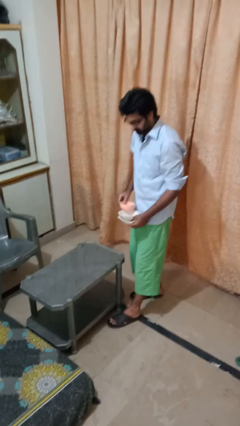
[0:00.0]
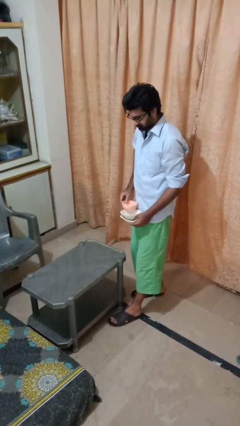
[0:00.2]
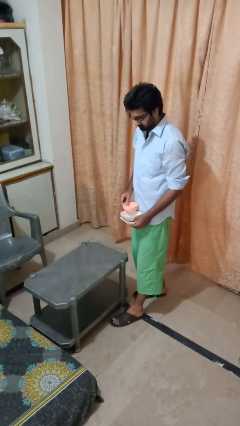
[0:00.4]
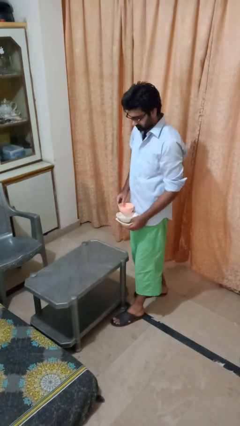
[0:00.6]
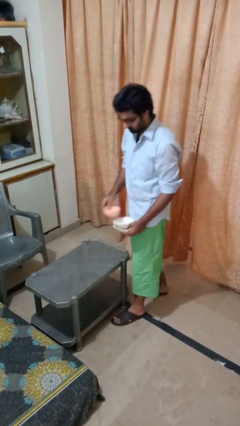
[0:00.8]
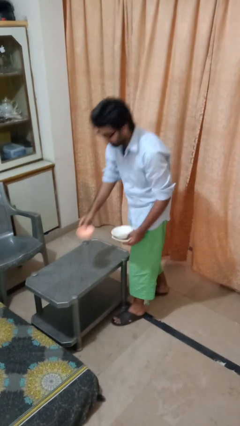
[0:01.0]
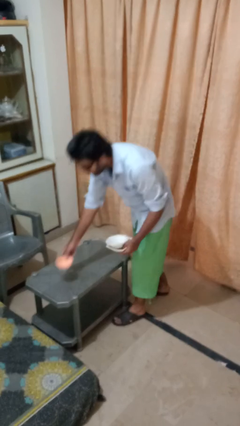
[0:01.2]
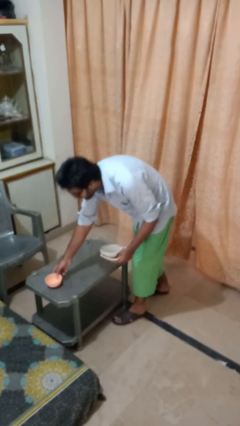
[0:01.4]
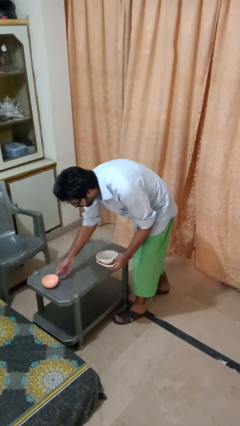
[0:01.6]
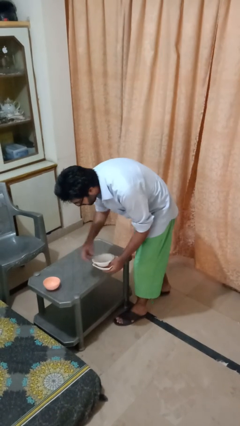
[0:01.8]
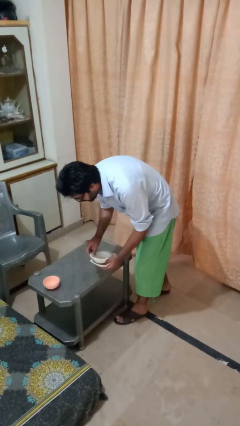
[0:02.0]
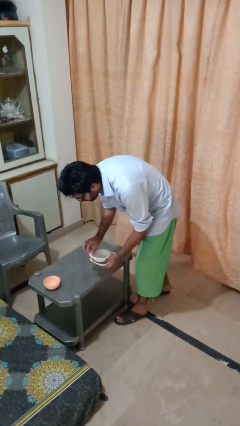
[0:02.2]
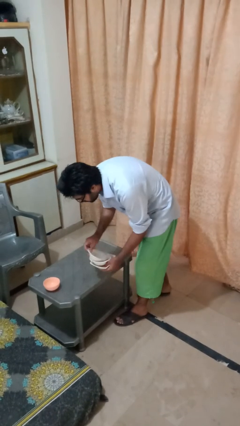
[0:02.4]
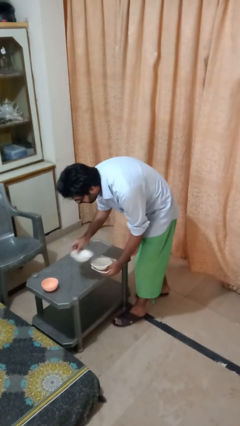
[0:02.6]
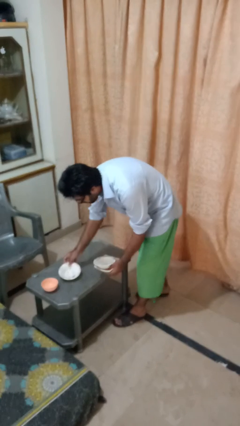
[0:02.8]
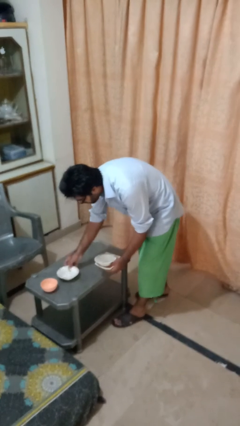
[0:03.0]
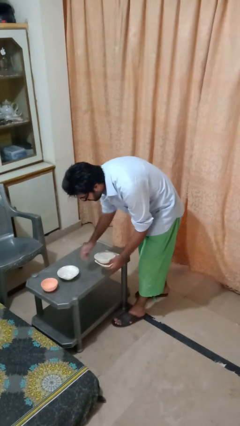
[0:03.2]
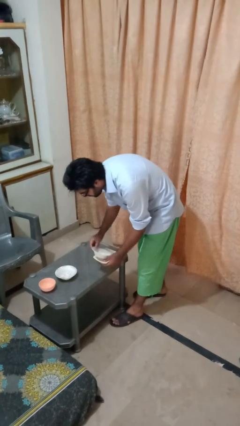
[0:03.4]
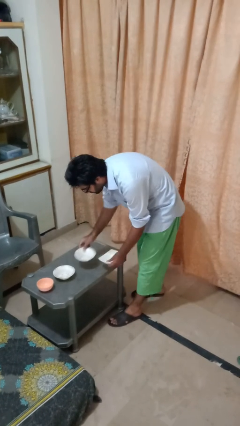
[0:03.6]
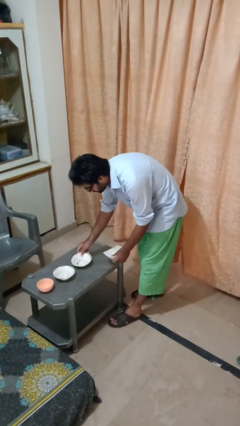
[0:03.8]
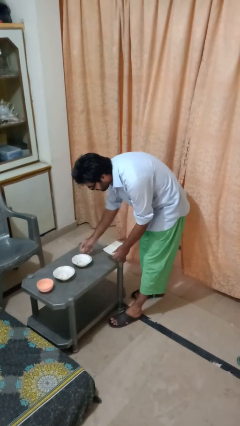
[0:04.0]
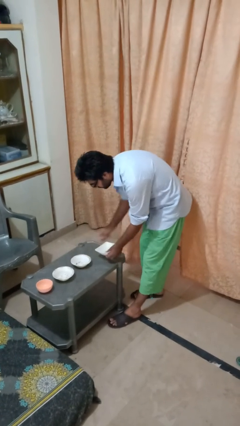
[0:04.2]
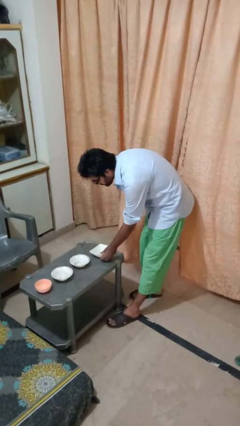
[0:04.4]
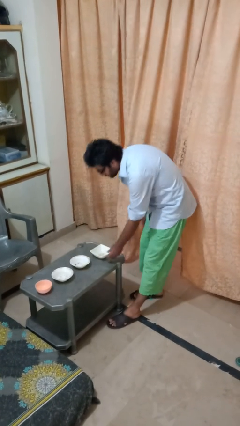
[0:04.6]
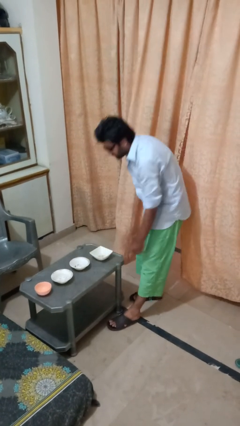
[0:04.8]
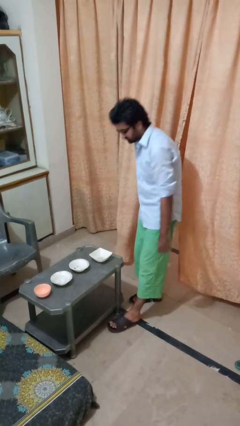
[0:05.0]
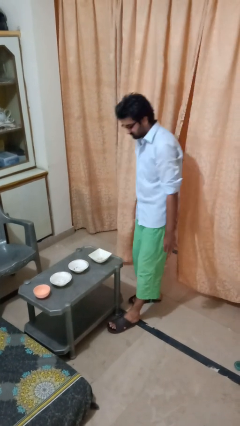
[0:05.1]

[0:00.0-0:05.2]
person sets table

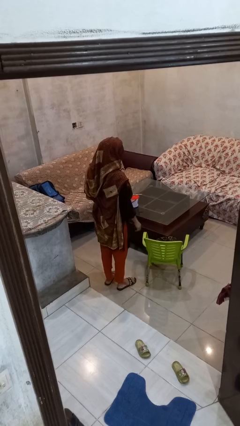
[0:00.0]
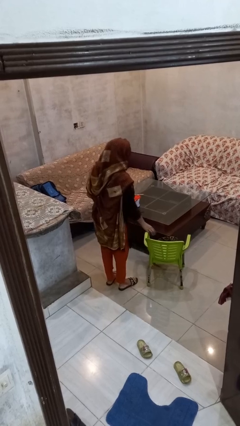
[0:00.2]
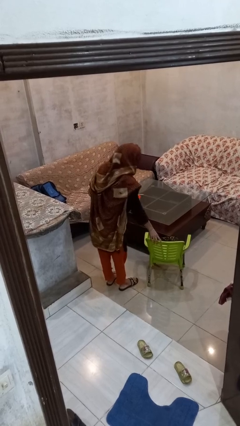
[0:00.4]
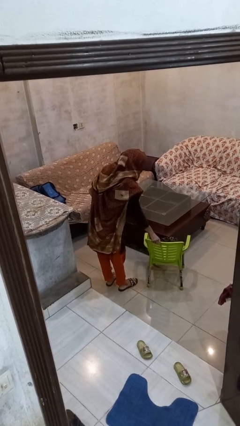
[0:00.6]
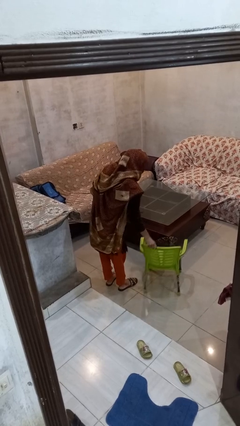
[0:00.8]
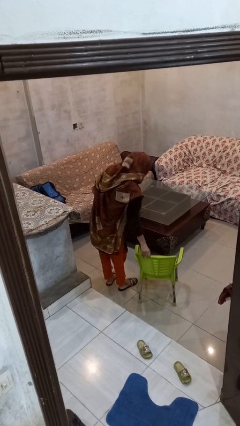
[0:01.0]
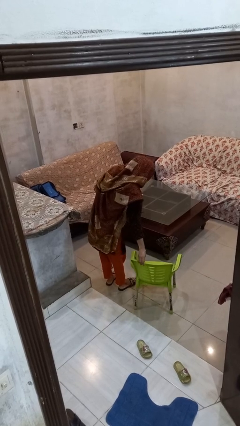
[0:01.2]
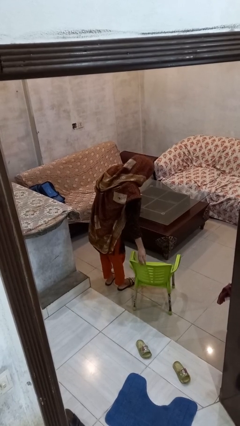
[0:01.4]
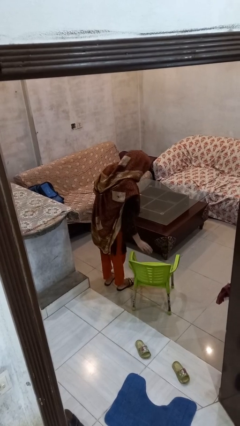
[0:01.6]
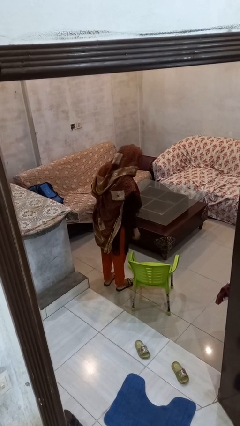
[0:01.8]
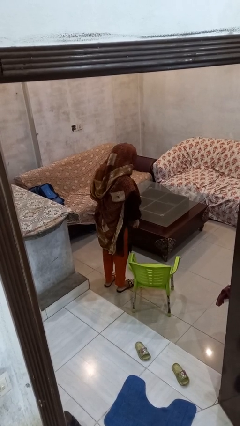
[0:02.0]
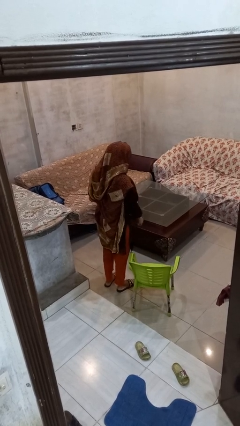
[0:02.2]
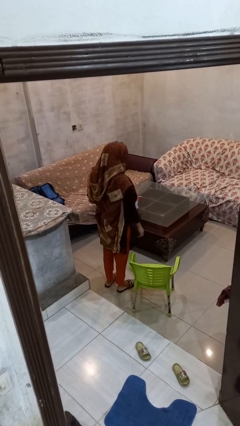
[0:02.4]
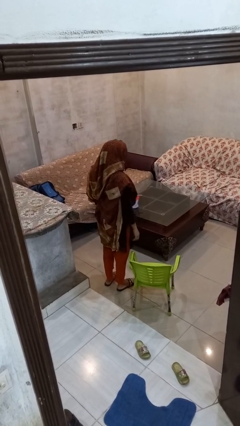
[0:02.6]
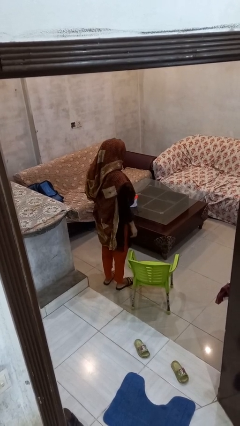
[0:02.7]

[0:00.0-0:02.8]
person pulls out chair

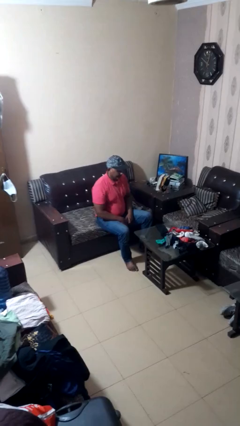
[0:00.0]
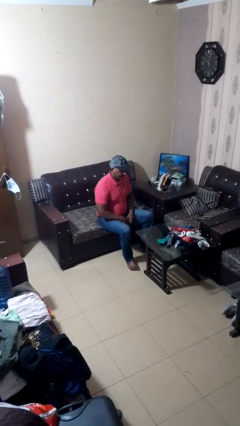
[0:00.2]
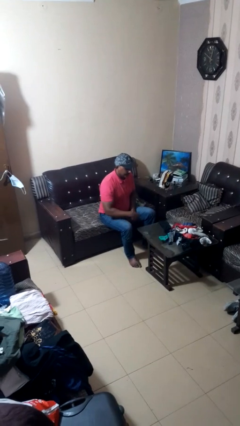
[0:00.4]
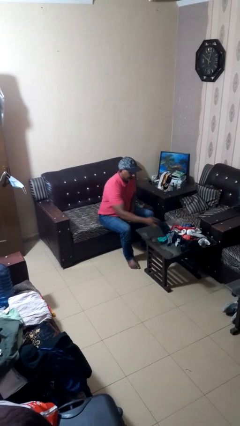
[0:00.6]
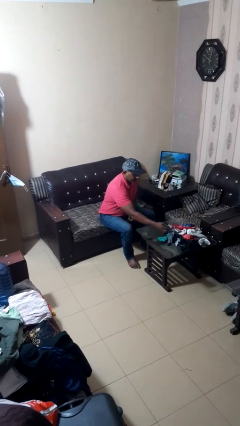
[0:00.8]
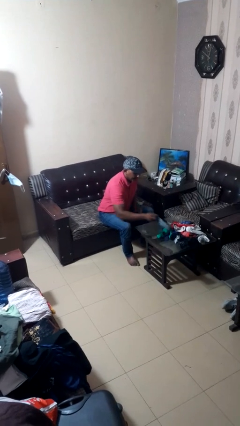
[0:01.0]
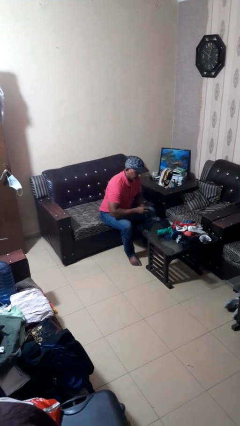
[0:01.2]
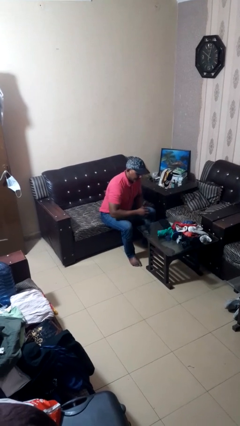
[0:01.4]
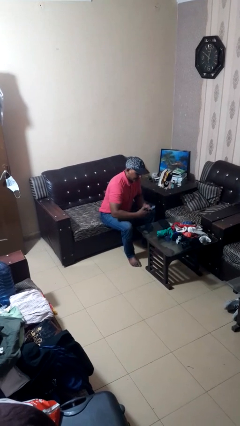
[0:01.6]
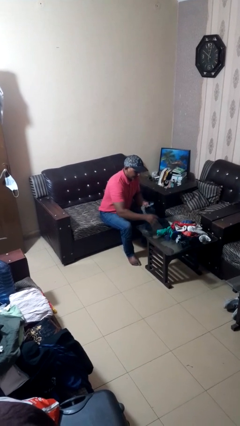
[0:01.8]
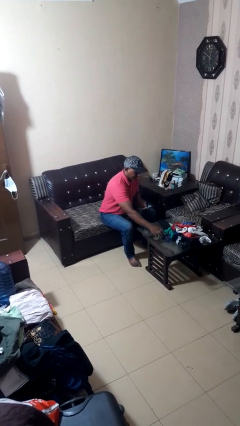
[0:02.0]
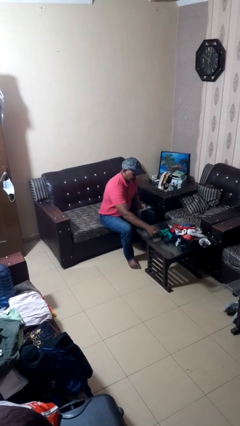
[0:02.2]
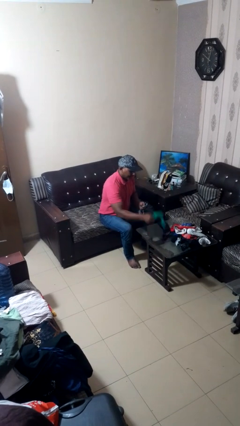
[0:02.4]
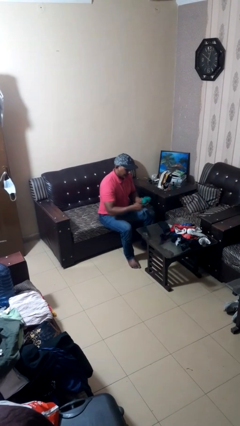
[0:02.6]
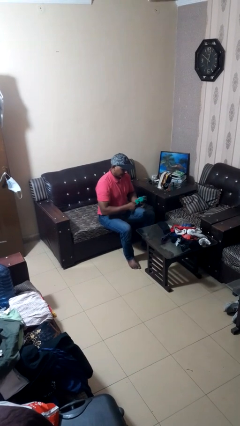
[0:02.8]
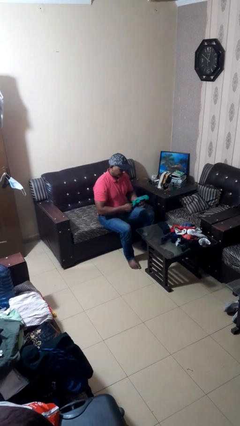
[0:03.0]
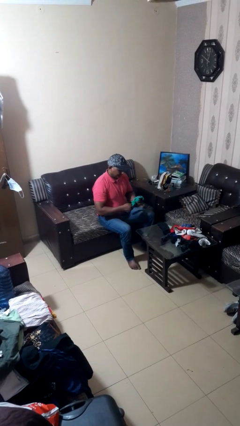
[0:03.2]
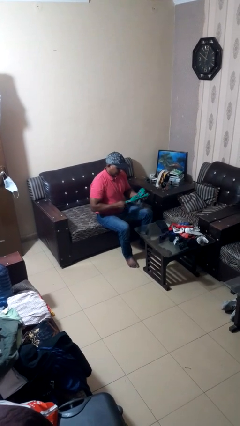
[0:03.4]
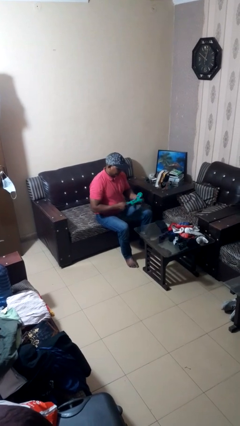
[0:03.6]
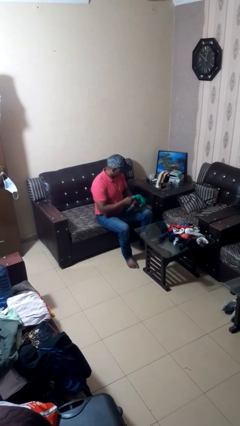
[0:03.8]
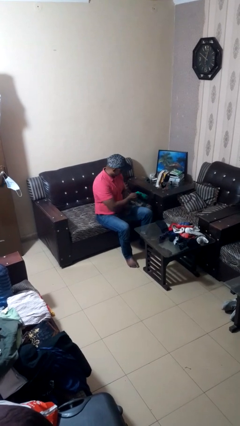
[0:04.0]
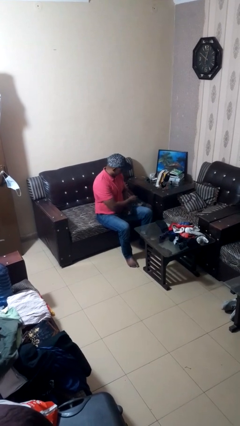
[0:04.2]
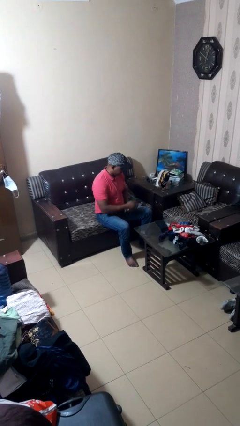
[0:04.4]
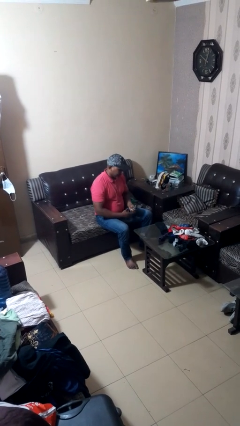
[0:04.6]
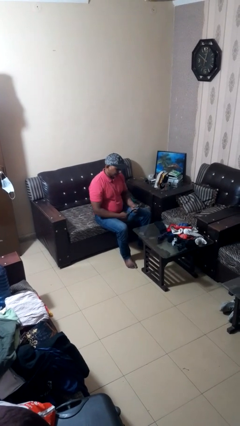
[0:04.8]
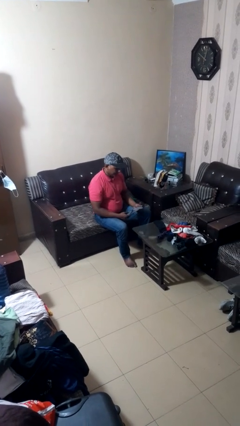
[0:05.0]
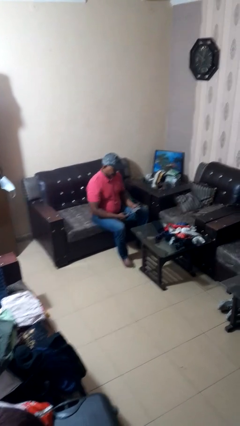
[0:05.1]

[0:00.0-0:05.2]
person folds socks

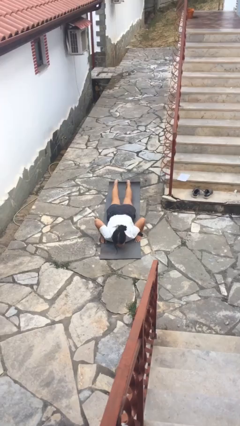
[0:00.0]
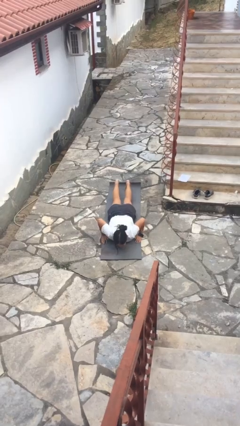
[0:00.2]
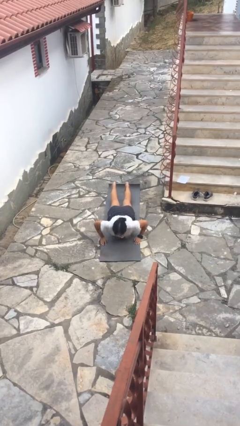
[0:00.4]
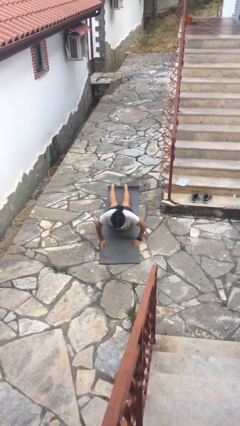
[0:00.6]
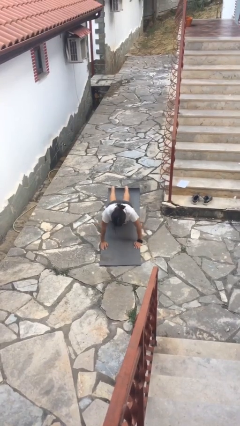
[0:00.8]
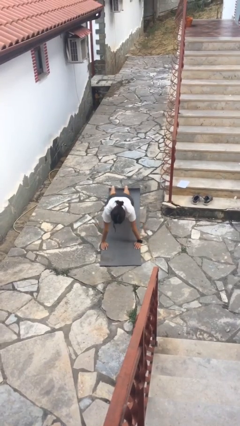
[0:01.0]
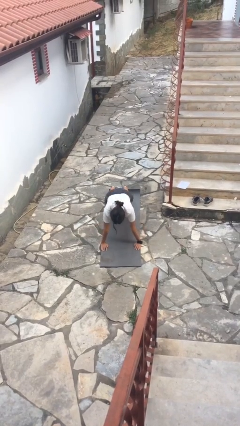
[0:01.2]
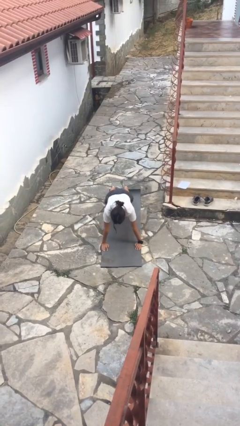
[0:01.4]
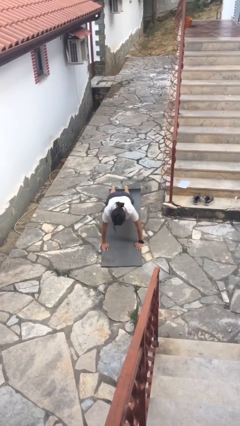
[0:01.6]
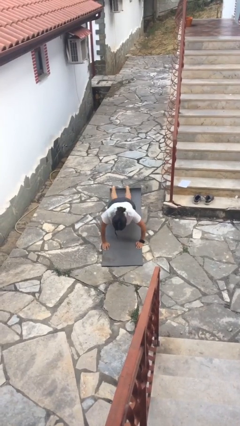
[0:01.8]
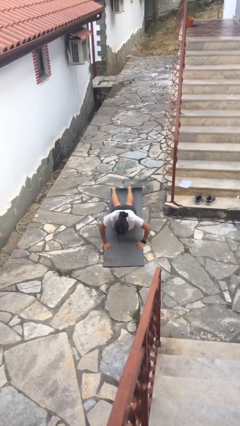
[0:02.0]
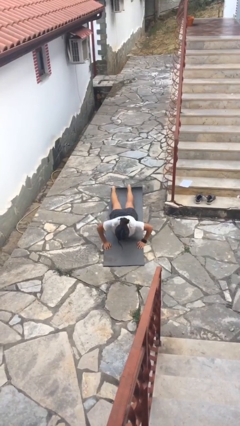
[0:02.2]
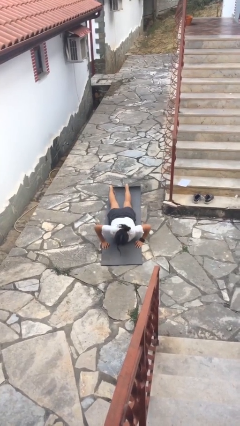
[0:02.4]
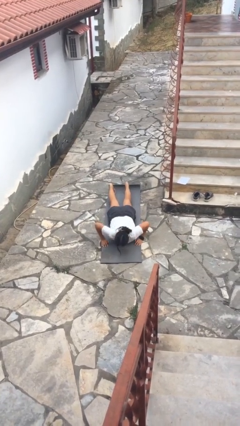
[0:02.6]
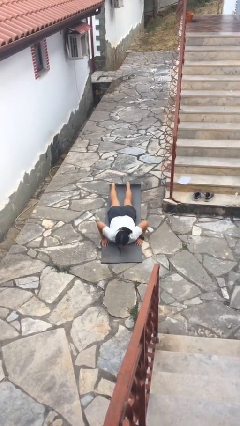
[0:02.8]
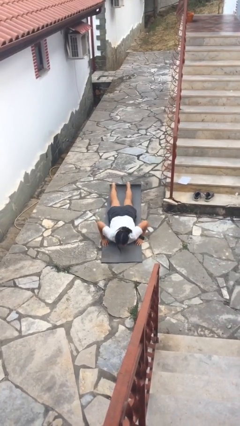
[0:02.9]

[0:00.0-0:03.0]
person exercises with pushup

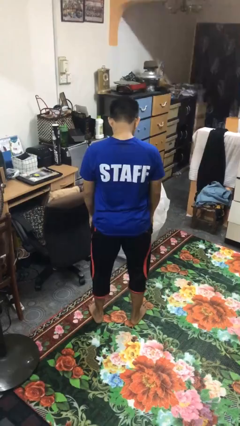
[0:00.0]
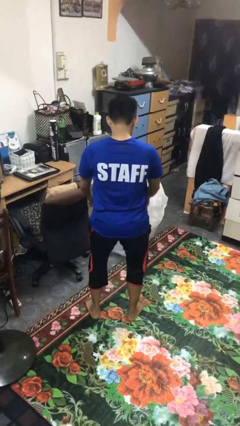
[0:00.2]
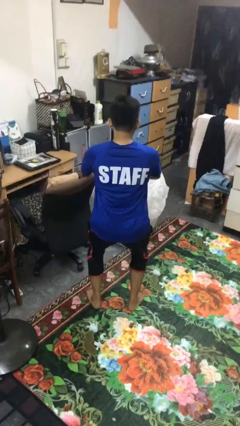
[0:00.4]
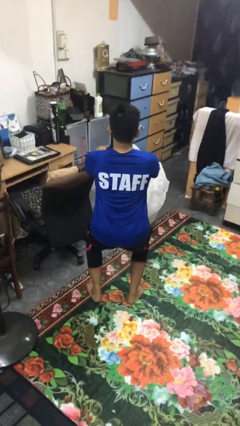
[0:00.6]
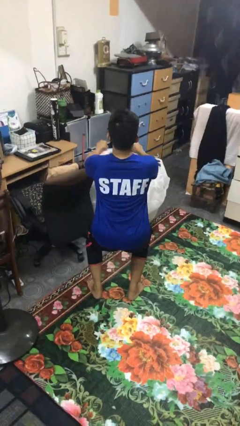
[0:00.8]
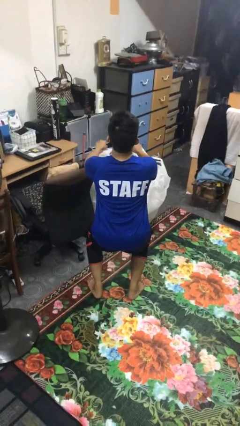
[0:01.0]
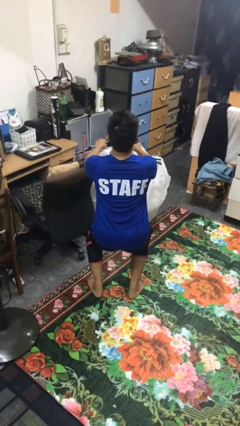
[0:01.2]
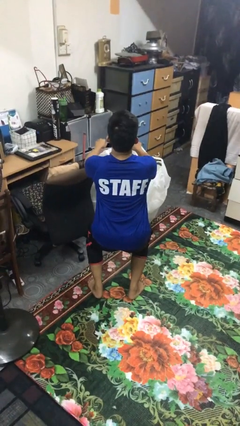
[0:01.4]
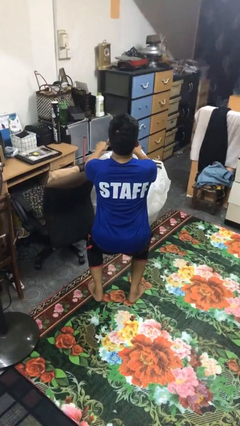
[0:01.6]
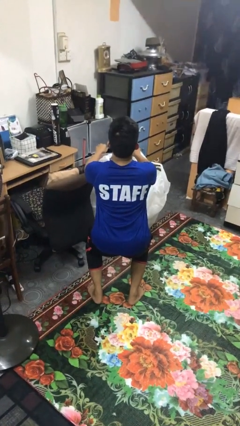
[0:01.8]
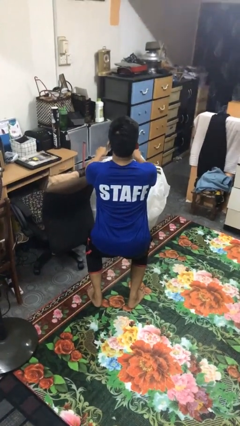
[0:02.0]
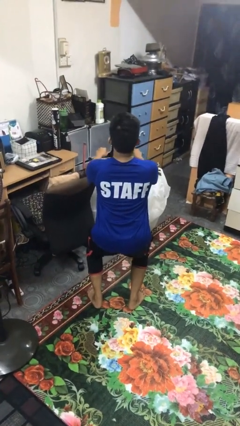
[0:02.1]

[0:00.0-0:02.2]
person squats
